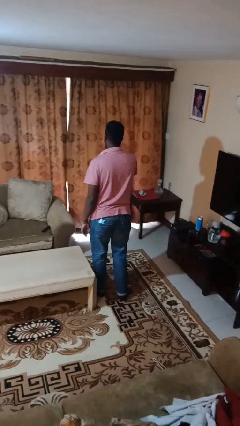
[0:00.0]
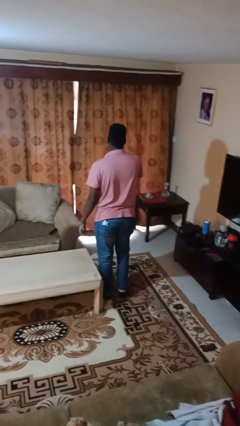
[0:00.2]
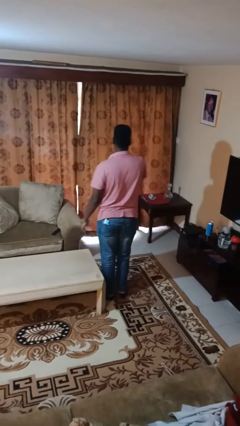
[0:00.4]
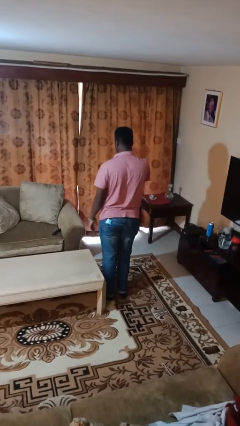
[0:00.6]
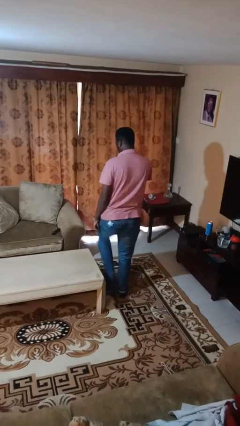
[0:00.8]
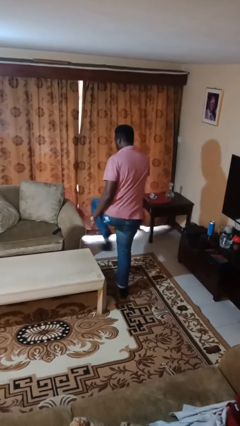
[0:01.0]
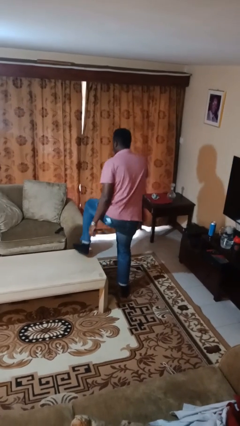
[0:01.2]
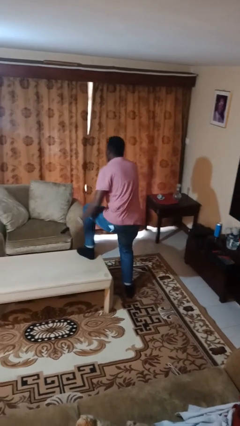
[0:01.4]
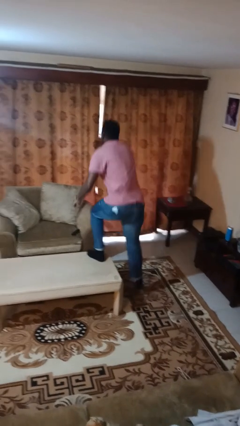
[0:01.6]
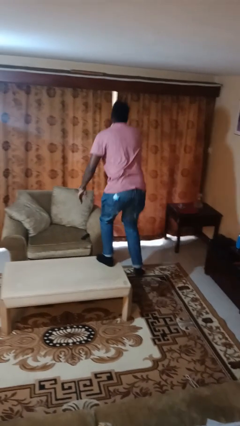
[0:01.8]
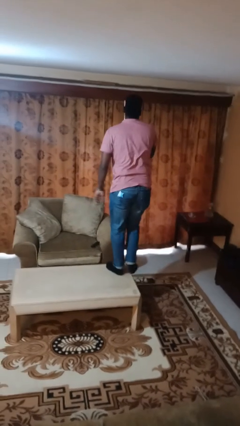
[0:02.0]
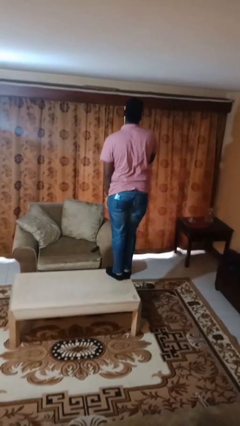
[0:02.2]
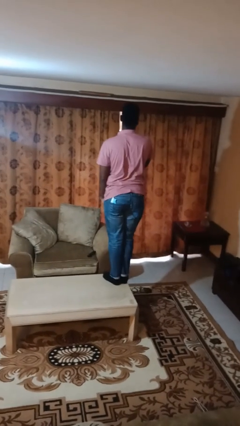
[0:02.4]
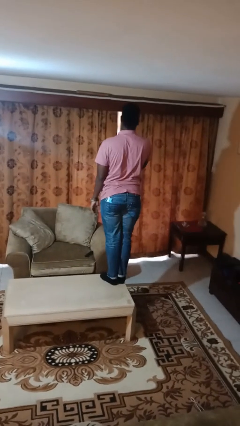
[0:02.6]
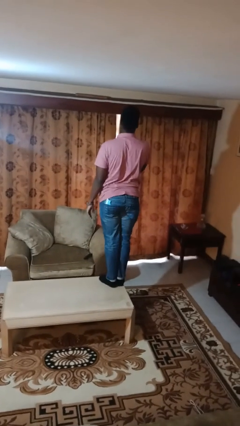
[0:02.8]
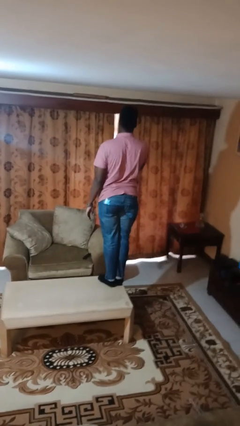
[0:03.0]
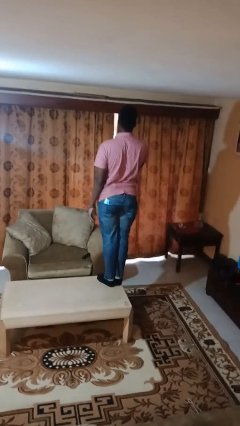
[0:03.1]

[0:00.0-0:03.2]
person climbs on table

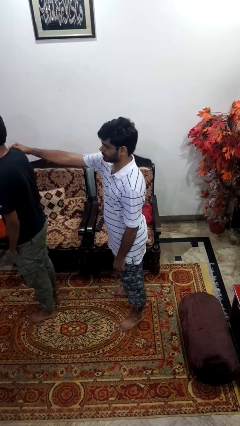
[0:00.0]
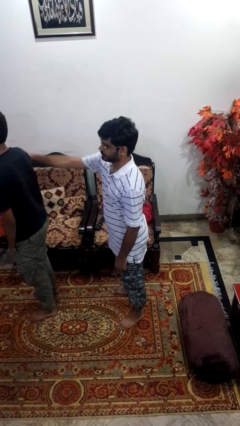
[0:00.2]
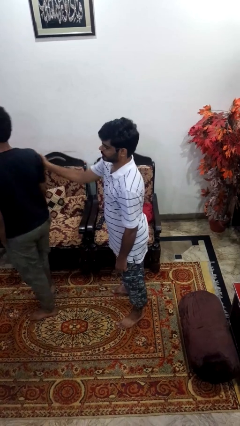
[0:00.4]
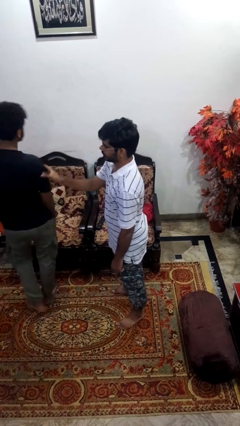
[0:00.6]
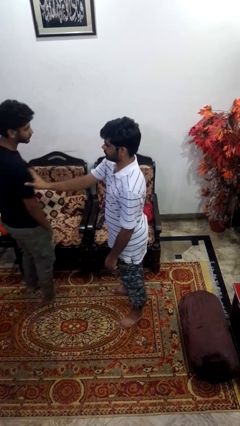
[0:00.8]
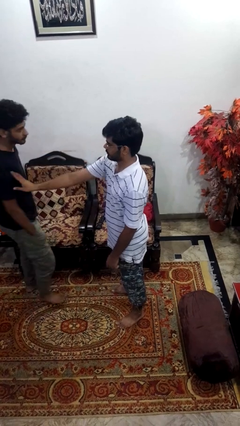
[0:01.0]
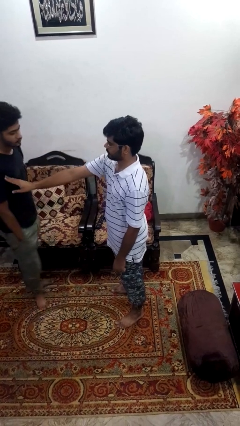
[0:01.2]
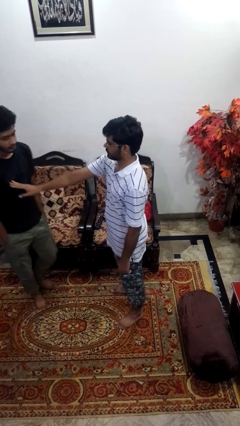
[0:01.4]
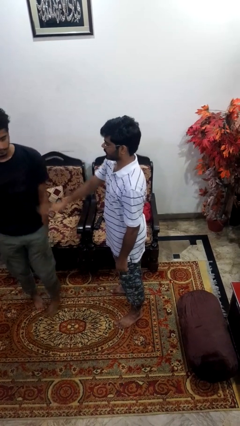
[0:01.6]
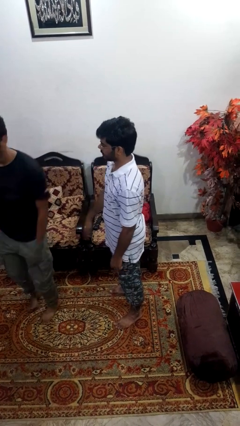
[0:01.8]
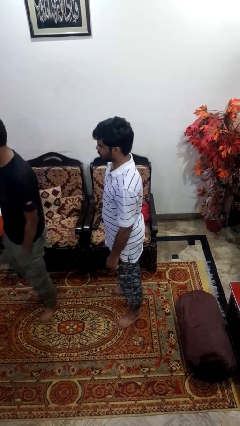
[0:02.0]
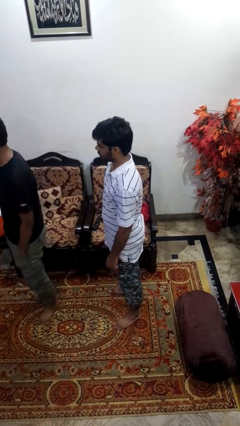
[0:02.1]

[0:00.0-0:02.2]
person spins person around

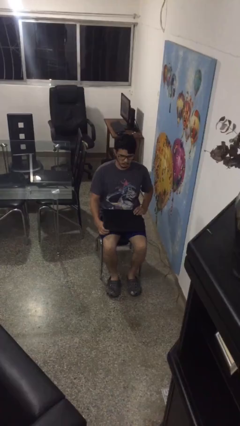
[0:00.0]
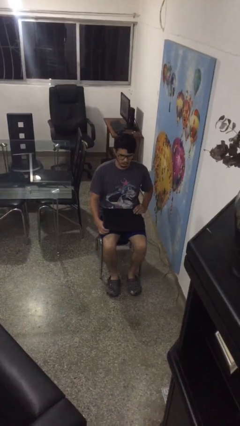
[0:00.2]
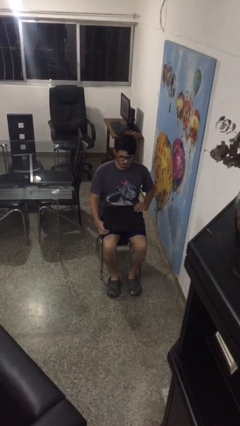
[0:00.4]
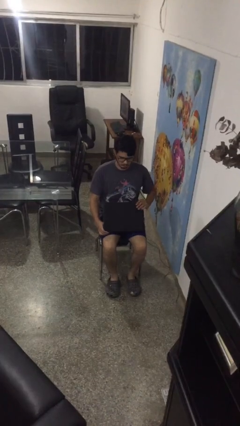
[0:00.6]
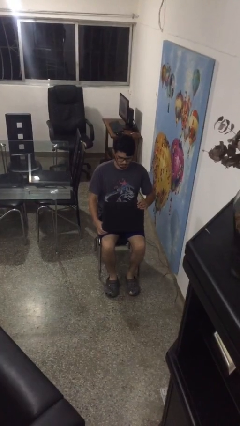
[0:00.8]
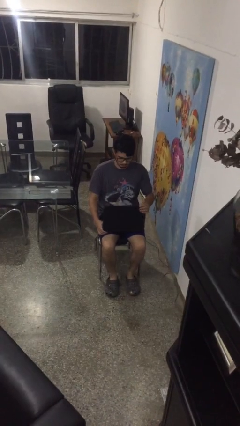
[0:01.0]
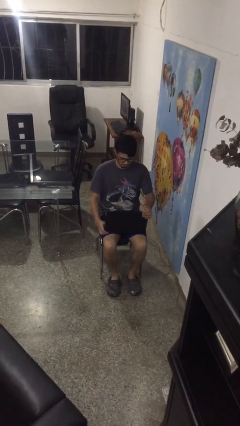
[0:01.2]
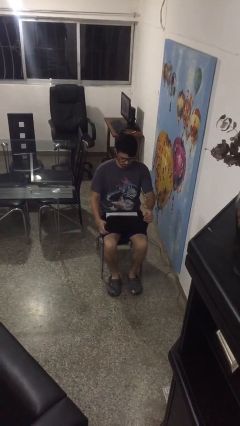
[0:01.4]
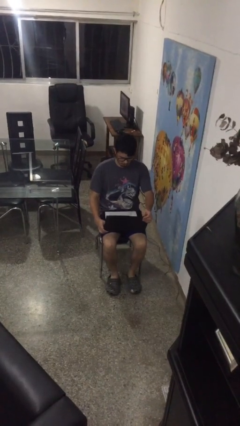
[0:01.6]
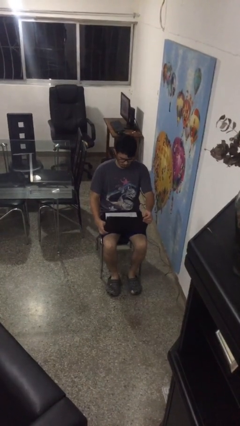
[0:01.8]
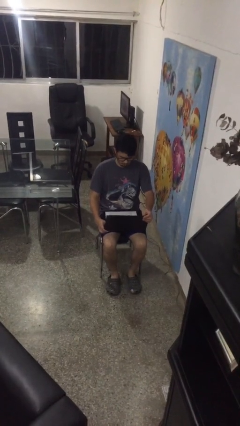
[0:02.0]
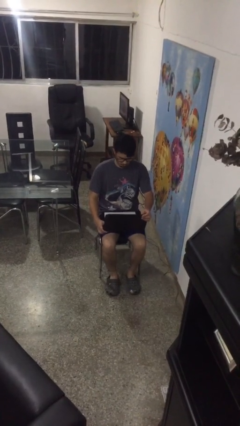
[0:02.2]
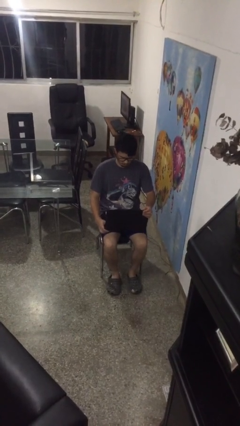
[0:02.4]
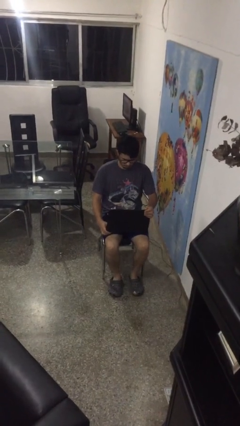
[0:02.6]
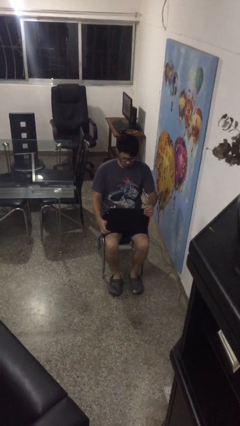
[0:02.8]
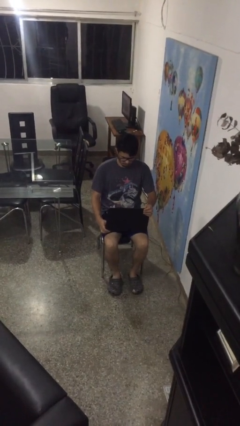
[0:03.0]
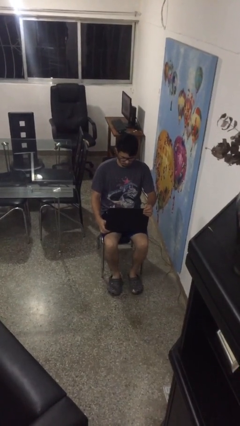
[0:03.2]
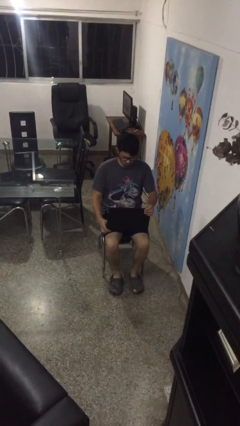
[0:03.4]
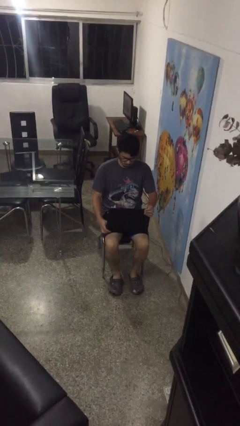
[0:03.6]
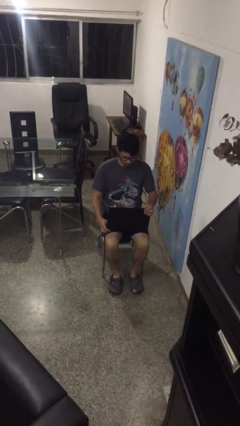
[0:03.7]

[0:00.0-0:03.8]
person opens laptop

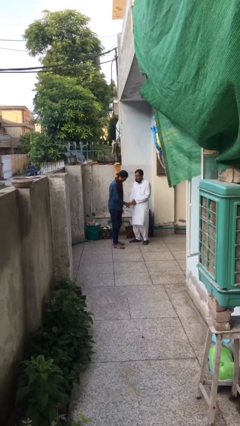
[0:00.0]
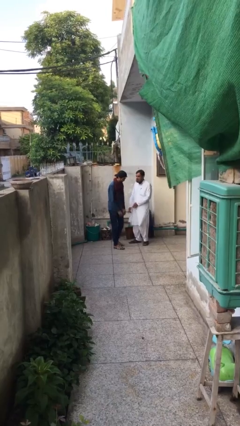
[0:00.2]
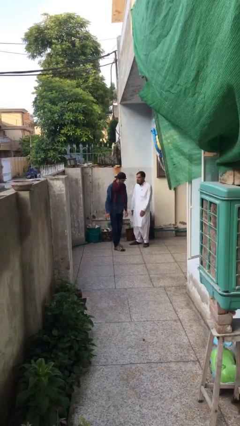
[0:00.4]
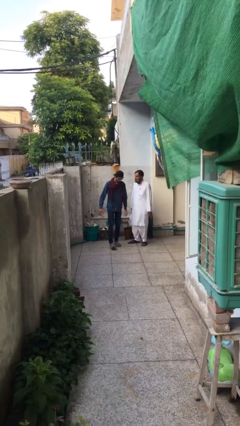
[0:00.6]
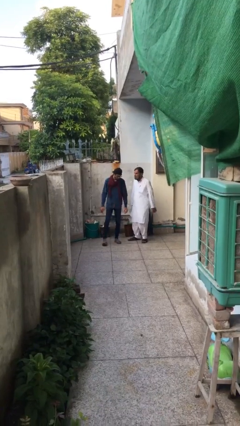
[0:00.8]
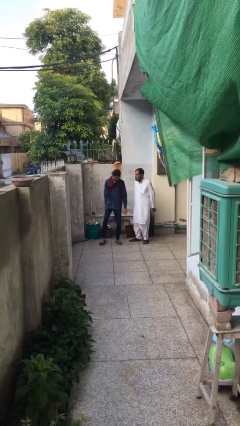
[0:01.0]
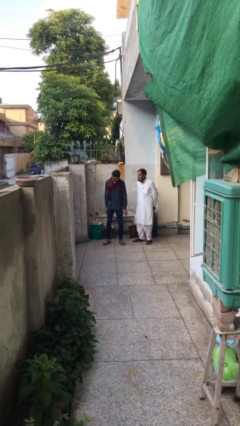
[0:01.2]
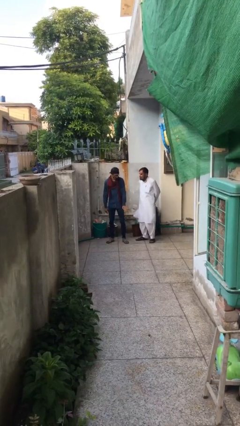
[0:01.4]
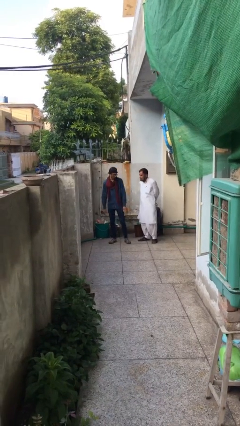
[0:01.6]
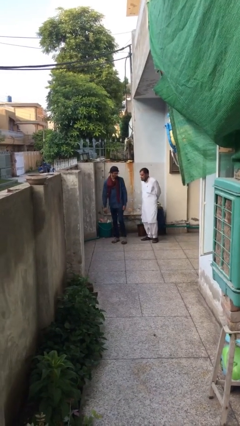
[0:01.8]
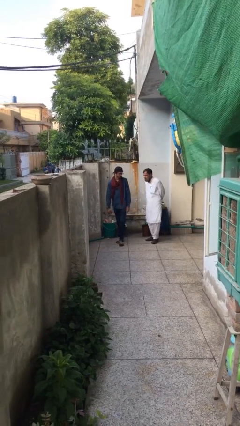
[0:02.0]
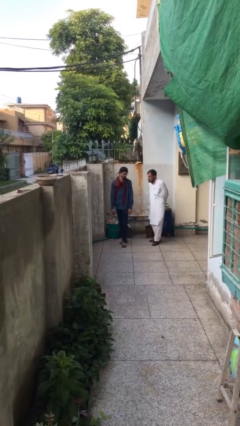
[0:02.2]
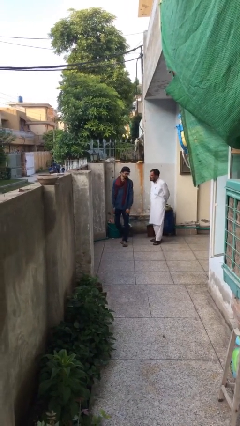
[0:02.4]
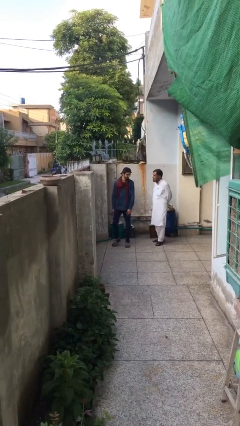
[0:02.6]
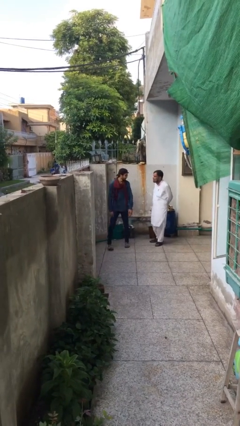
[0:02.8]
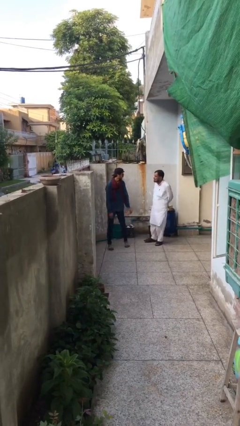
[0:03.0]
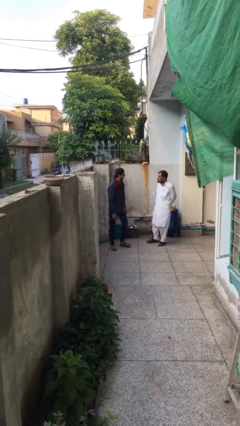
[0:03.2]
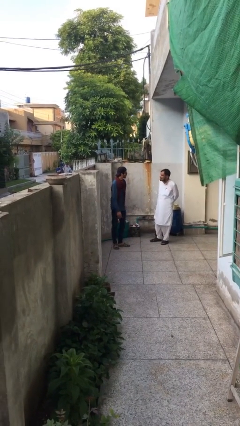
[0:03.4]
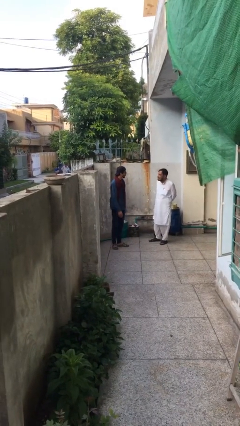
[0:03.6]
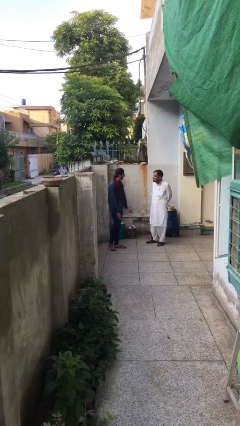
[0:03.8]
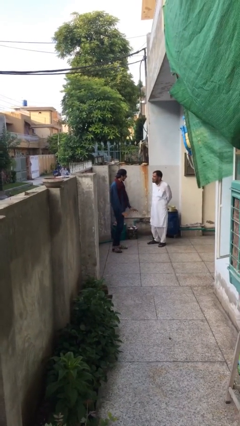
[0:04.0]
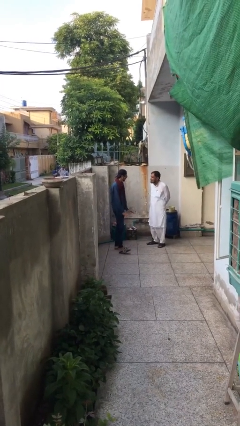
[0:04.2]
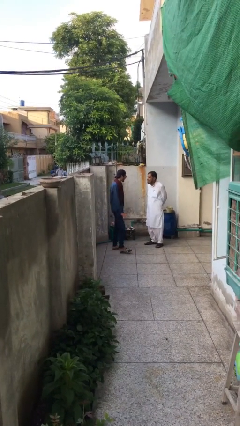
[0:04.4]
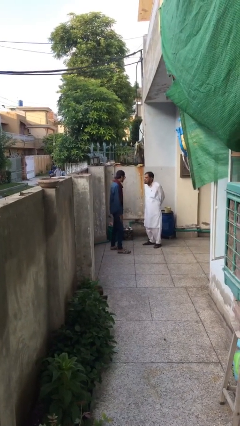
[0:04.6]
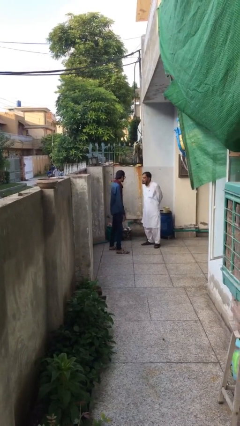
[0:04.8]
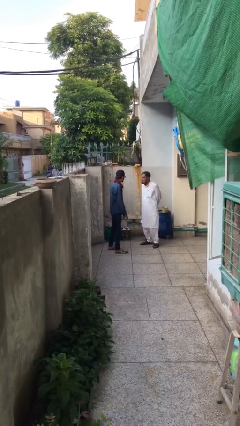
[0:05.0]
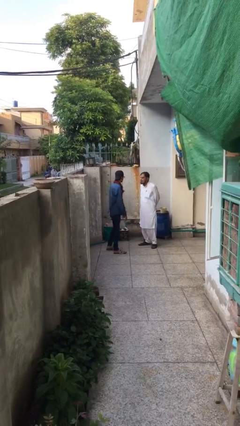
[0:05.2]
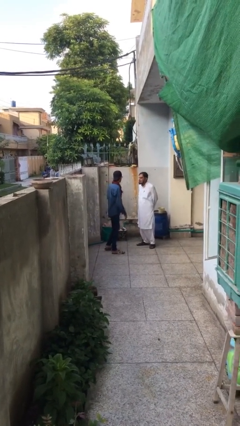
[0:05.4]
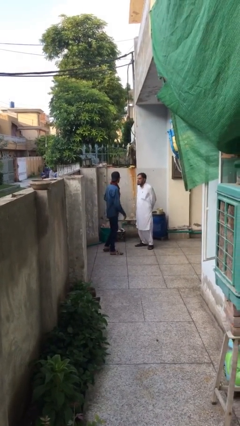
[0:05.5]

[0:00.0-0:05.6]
person talks to person

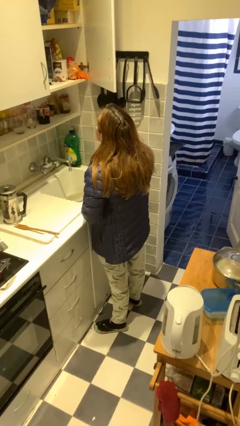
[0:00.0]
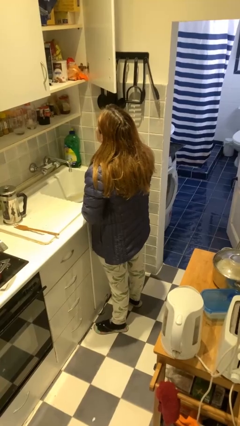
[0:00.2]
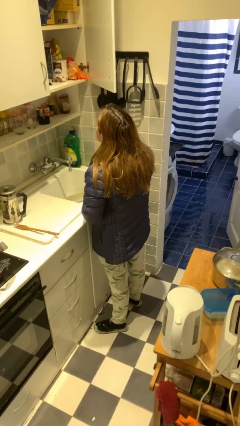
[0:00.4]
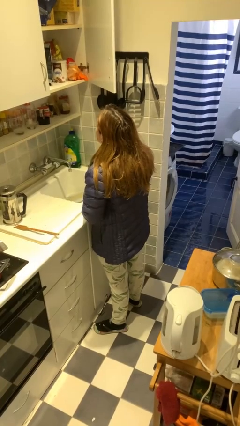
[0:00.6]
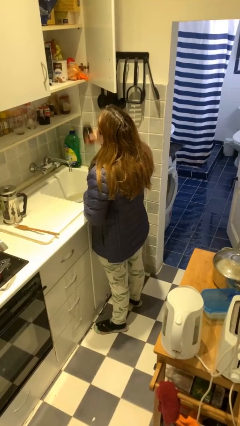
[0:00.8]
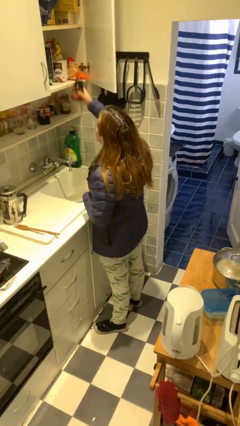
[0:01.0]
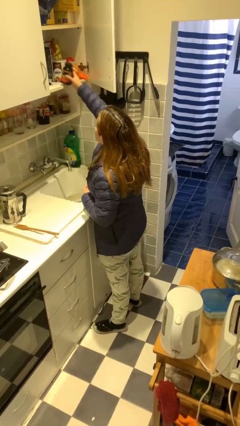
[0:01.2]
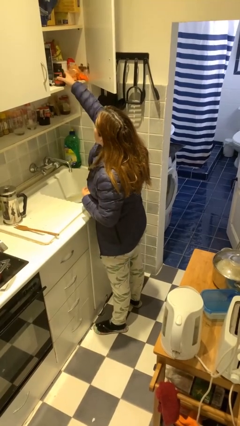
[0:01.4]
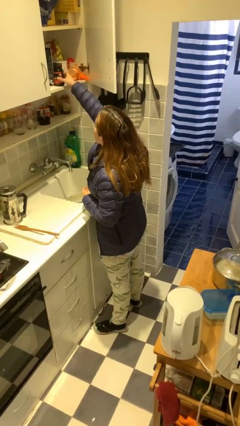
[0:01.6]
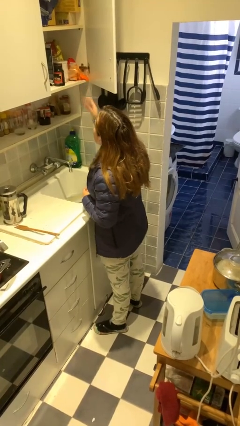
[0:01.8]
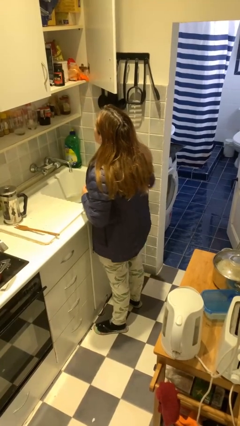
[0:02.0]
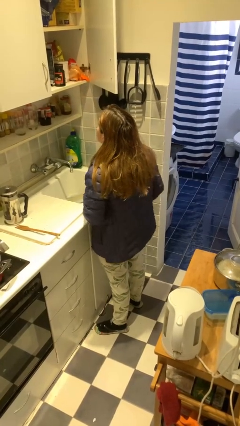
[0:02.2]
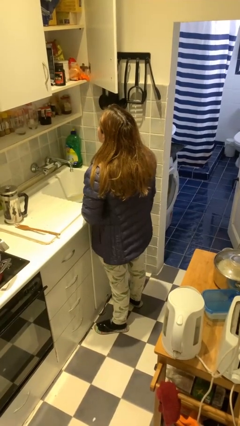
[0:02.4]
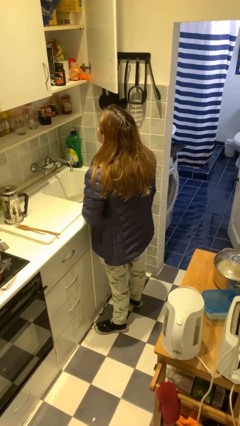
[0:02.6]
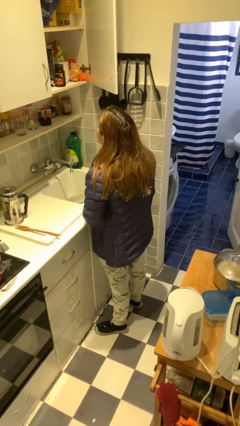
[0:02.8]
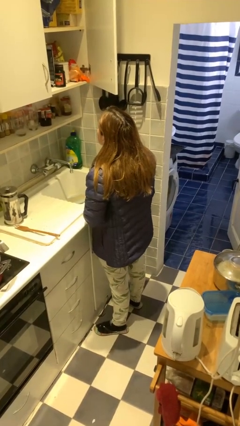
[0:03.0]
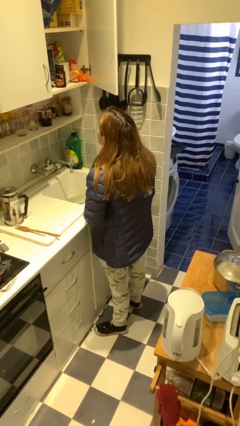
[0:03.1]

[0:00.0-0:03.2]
person puts object in cabinet
